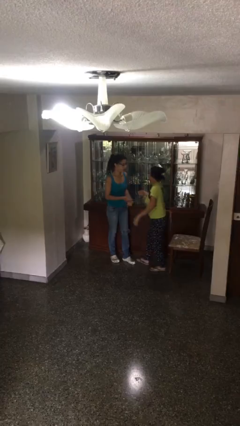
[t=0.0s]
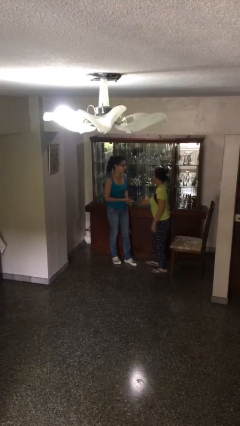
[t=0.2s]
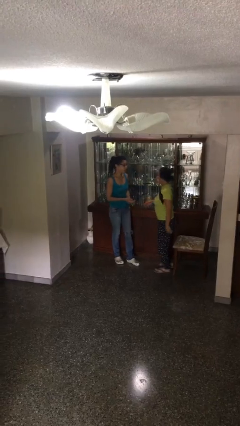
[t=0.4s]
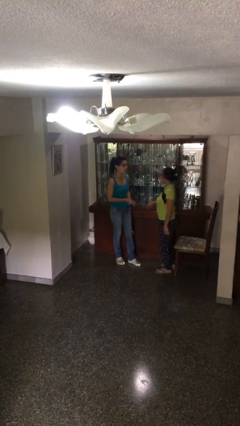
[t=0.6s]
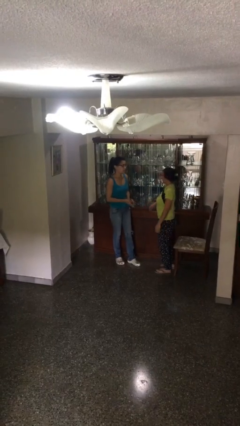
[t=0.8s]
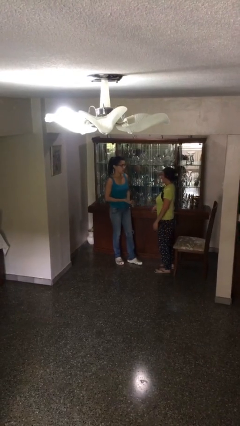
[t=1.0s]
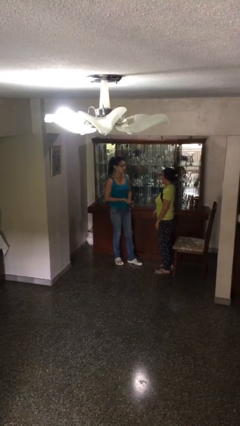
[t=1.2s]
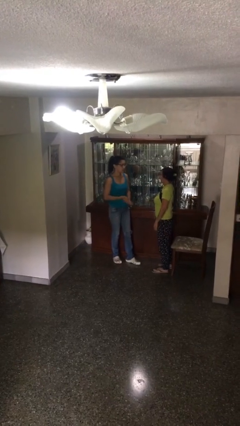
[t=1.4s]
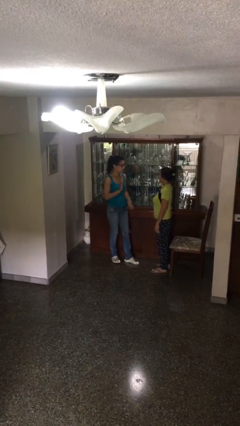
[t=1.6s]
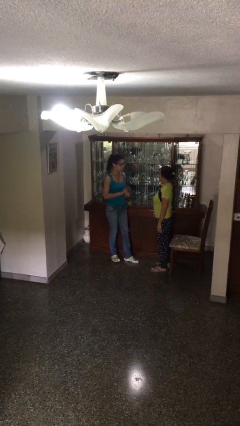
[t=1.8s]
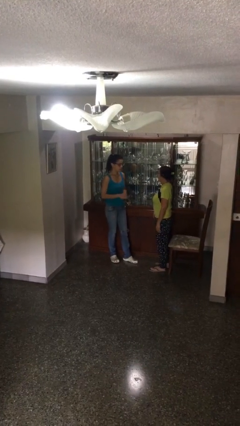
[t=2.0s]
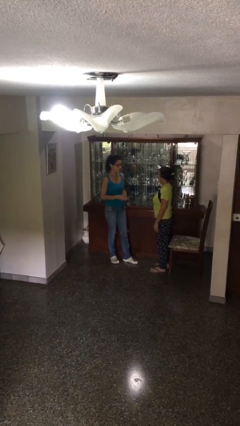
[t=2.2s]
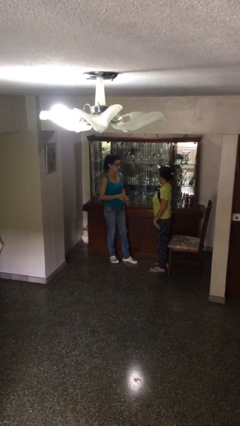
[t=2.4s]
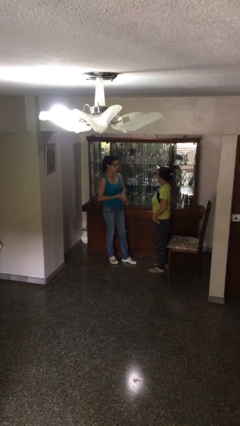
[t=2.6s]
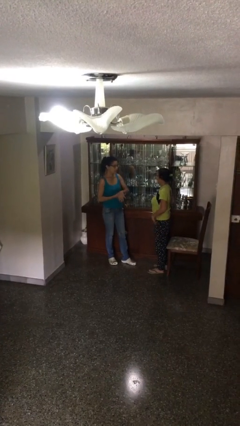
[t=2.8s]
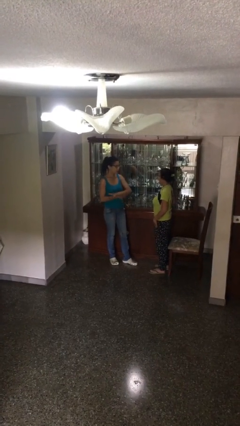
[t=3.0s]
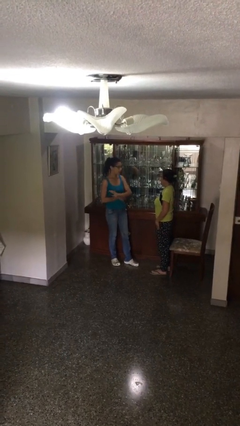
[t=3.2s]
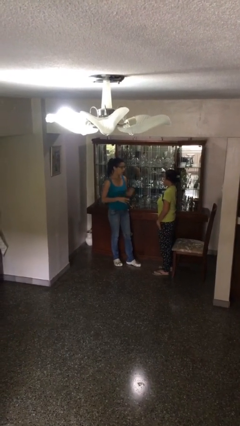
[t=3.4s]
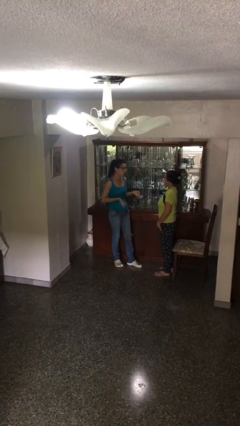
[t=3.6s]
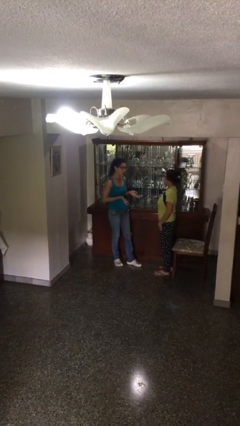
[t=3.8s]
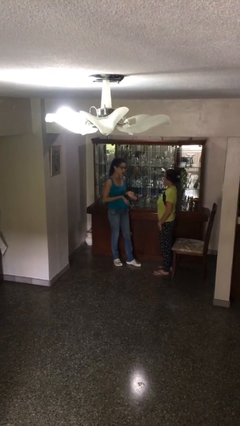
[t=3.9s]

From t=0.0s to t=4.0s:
person talks to person

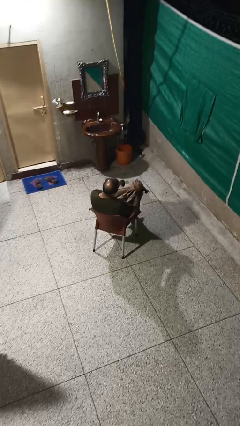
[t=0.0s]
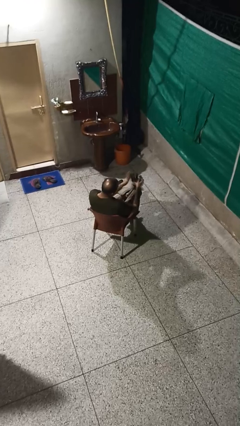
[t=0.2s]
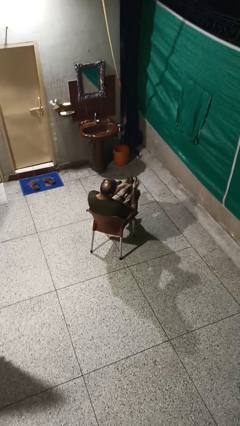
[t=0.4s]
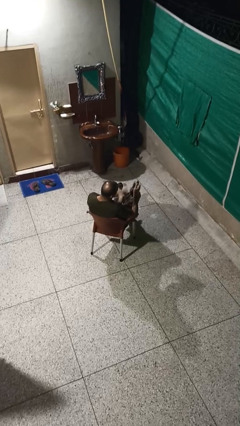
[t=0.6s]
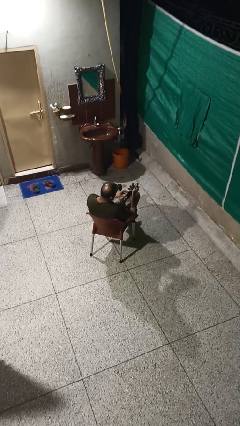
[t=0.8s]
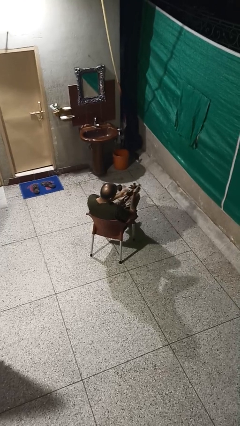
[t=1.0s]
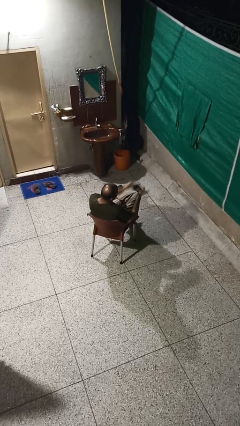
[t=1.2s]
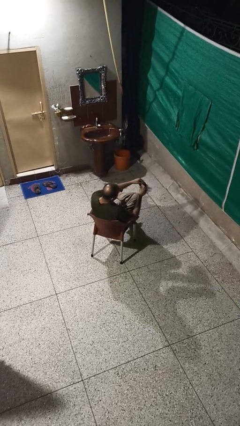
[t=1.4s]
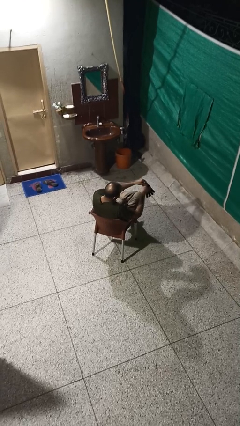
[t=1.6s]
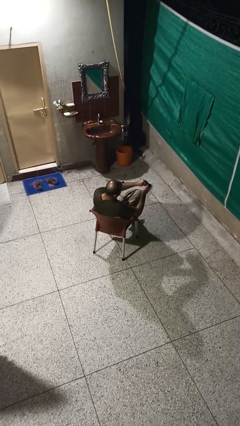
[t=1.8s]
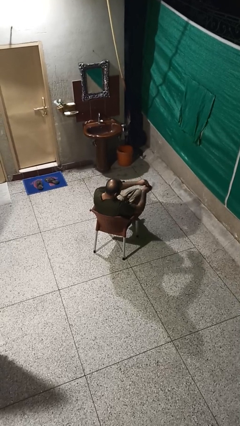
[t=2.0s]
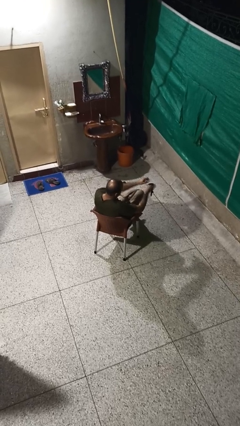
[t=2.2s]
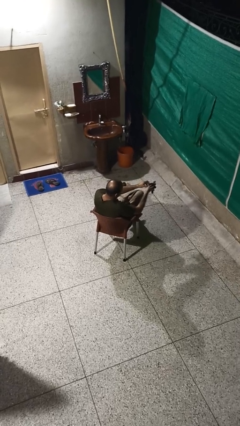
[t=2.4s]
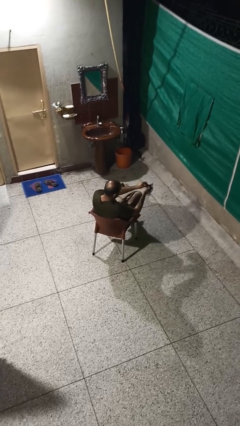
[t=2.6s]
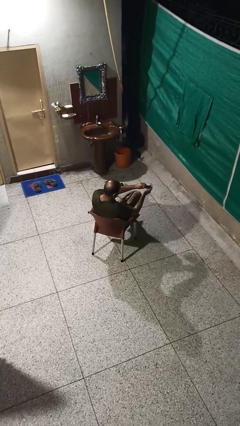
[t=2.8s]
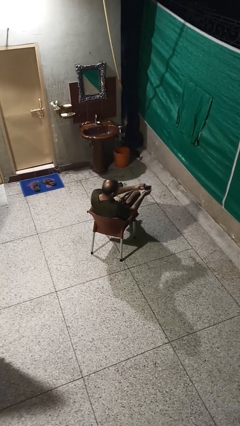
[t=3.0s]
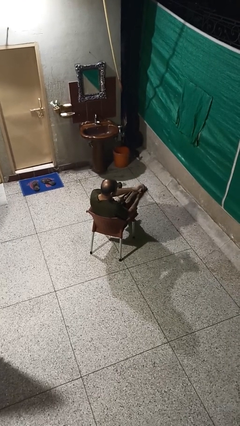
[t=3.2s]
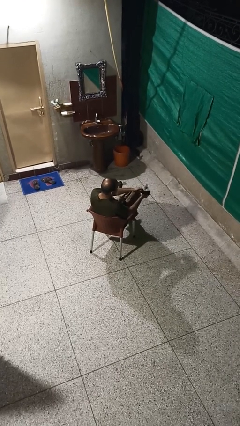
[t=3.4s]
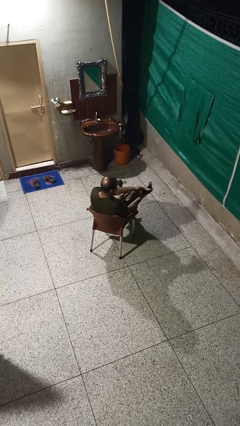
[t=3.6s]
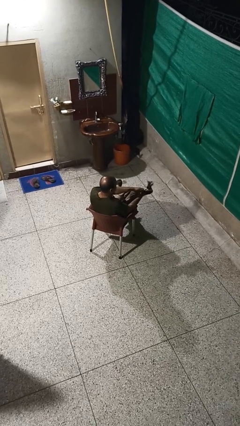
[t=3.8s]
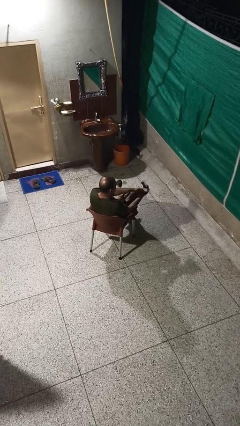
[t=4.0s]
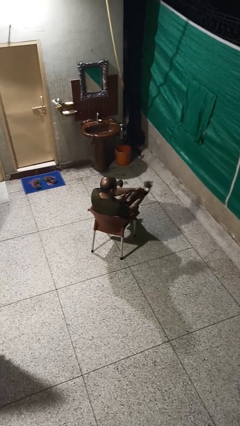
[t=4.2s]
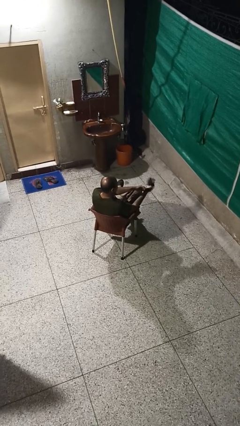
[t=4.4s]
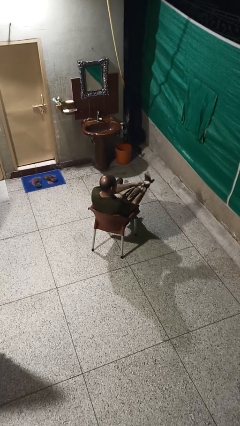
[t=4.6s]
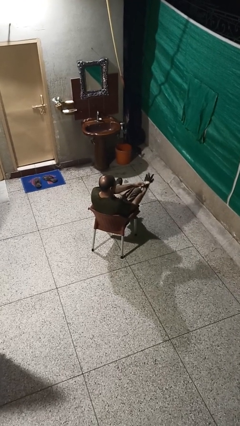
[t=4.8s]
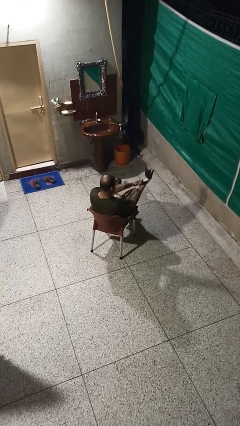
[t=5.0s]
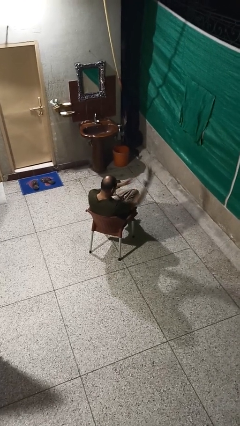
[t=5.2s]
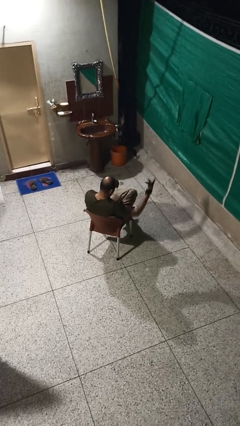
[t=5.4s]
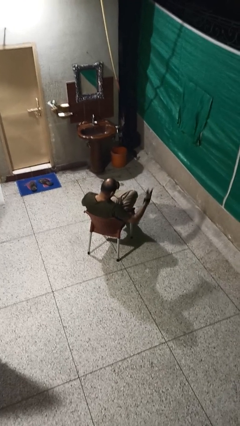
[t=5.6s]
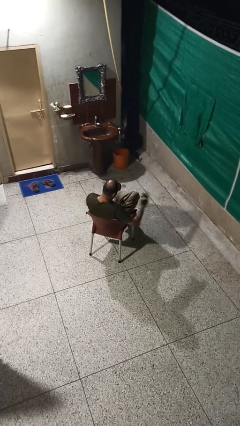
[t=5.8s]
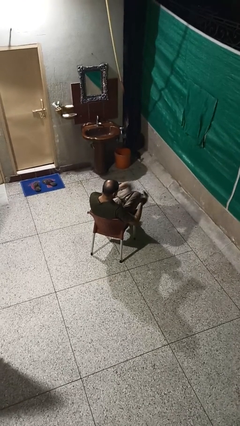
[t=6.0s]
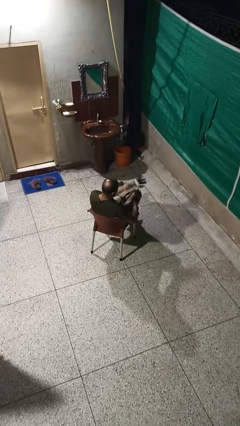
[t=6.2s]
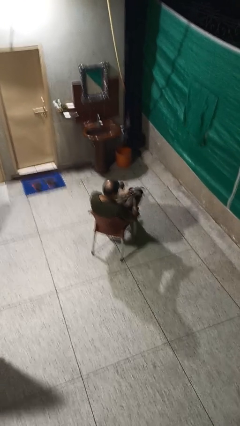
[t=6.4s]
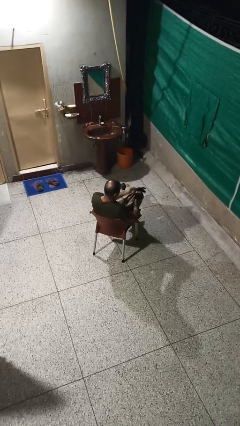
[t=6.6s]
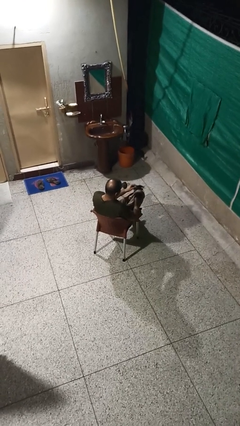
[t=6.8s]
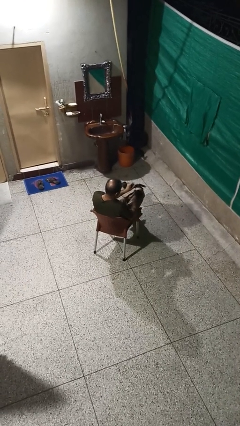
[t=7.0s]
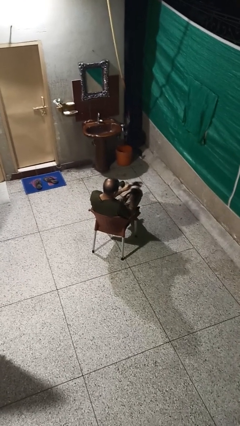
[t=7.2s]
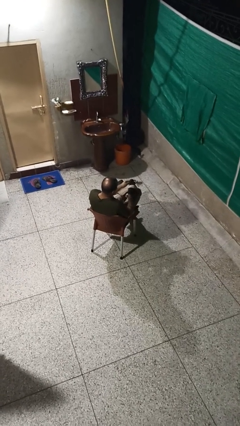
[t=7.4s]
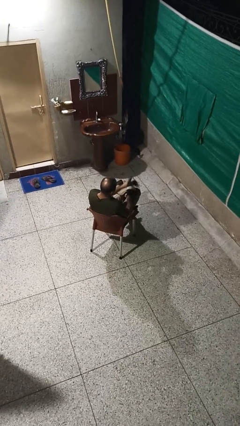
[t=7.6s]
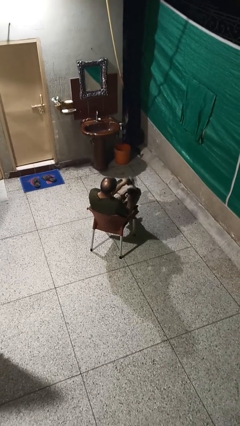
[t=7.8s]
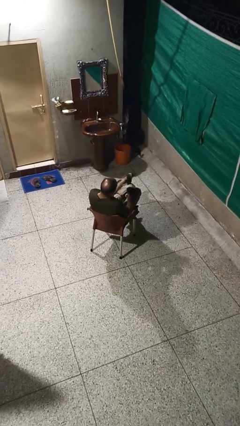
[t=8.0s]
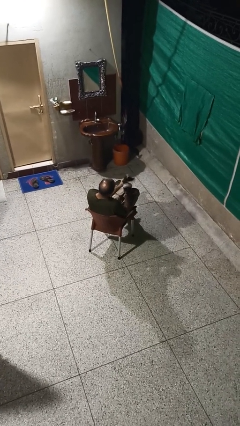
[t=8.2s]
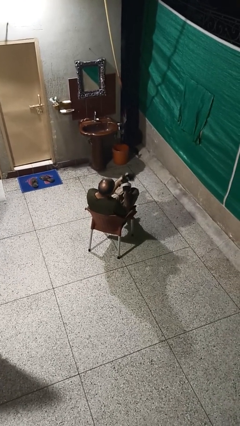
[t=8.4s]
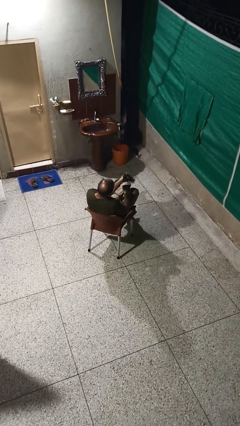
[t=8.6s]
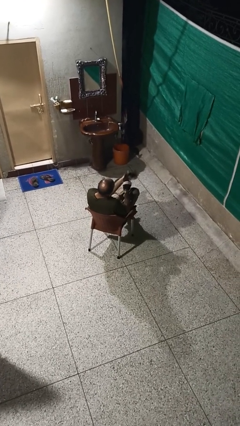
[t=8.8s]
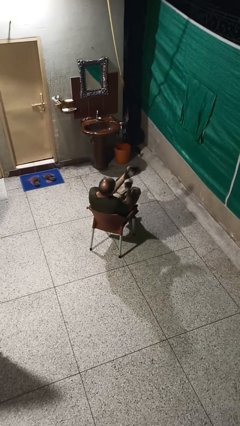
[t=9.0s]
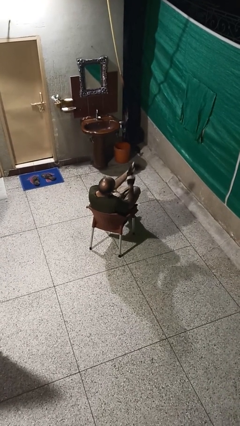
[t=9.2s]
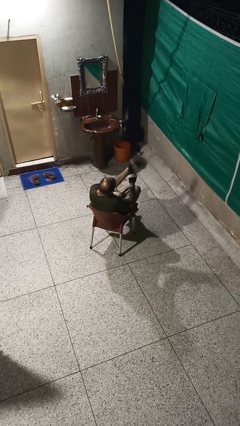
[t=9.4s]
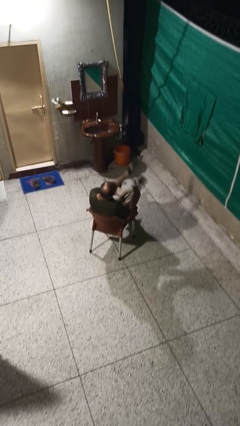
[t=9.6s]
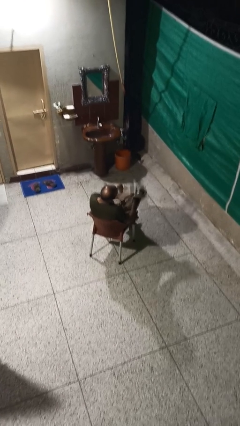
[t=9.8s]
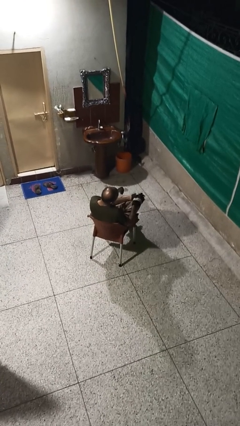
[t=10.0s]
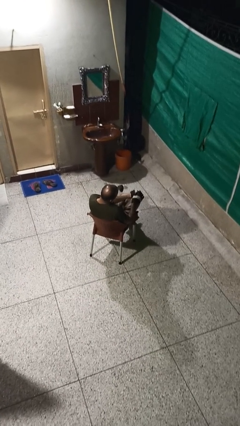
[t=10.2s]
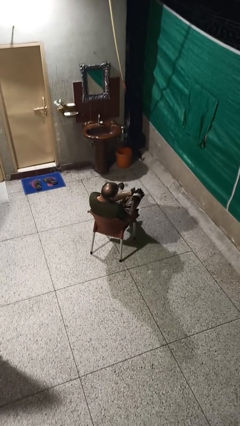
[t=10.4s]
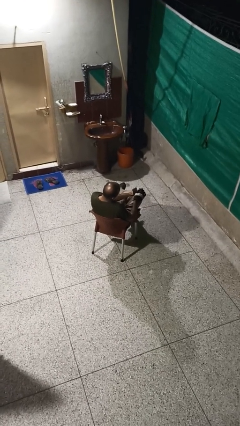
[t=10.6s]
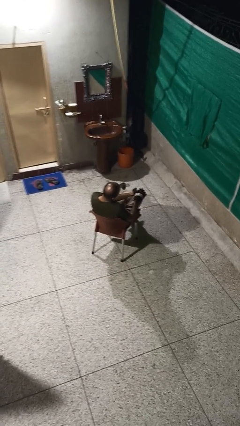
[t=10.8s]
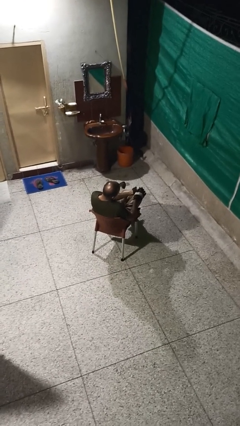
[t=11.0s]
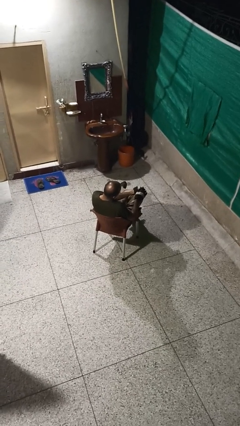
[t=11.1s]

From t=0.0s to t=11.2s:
person puts on gloves

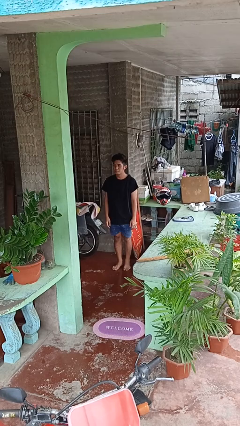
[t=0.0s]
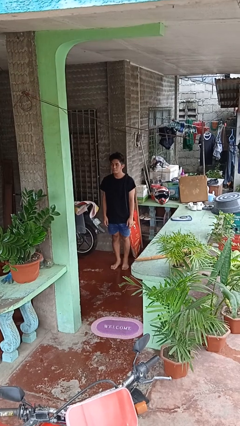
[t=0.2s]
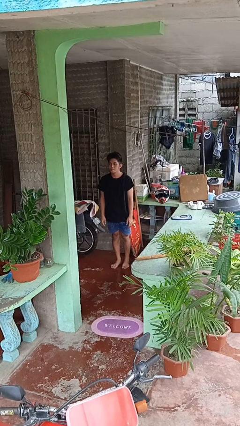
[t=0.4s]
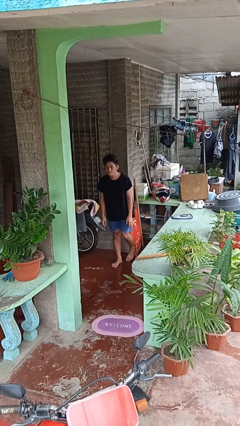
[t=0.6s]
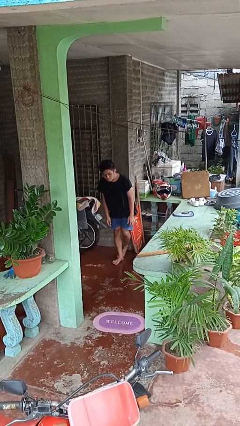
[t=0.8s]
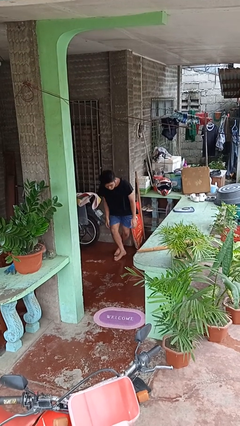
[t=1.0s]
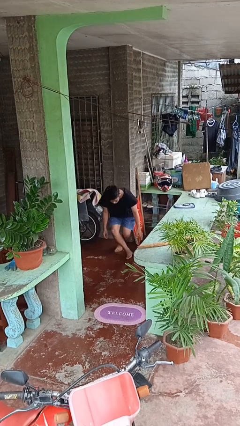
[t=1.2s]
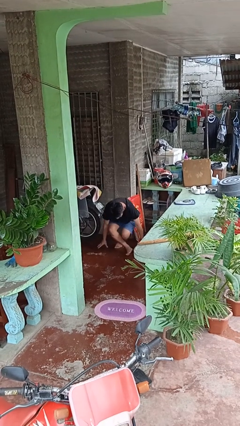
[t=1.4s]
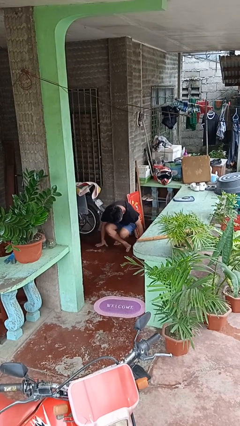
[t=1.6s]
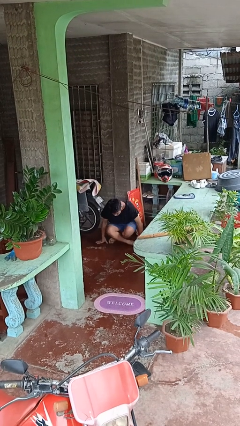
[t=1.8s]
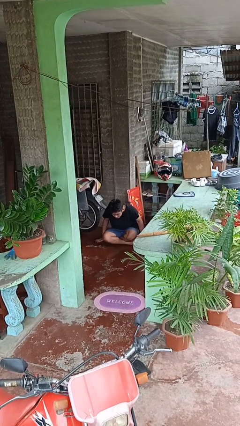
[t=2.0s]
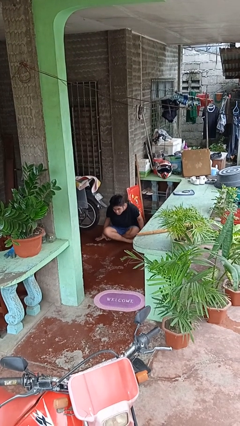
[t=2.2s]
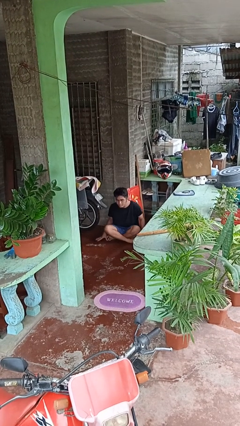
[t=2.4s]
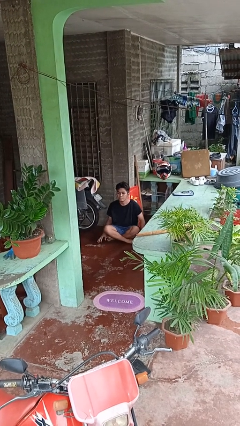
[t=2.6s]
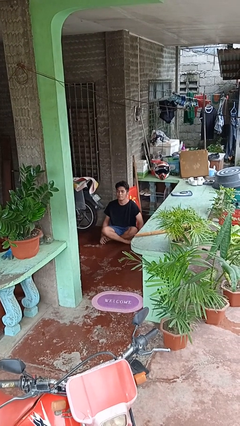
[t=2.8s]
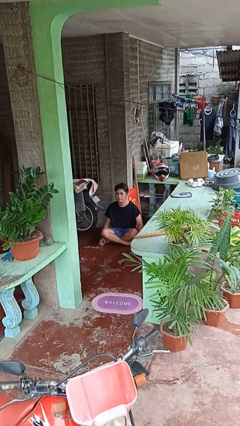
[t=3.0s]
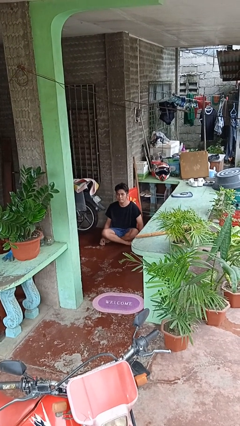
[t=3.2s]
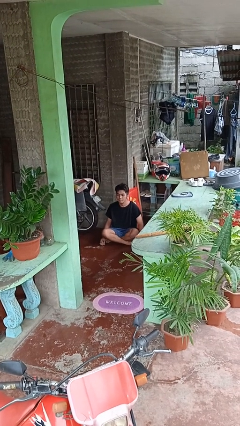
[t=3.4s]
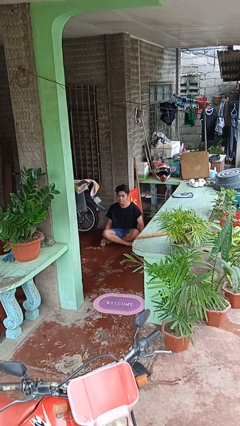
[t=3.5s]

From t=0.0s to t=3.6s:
person sits crisscross
